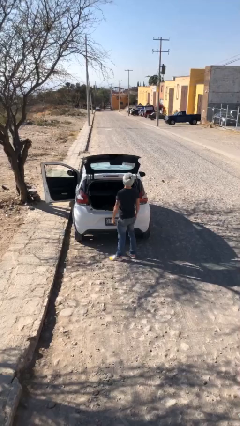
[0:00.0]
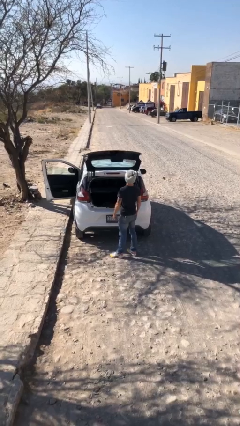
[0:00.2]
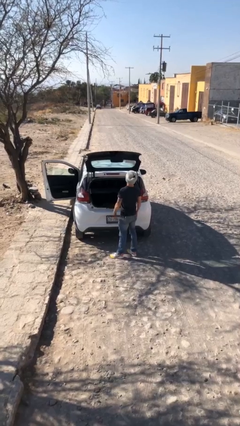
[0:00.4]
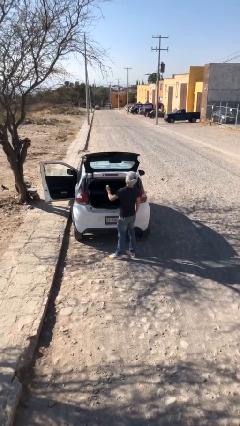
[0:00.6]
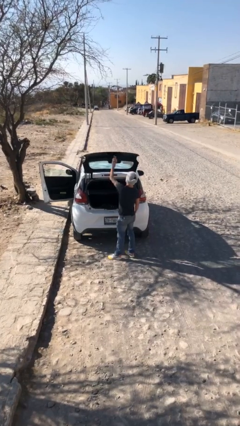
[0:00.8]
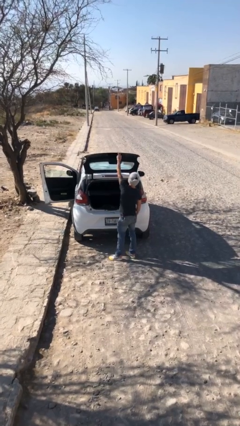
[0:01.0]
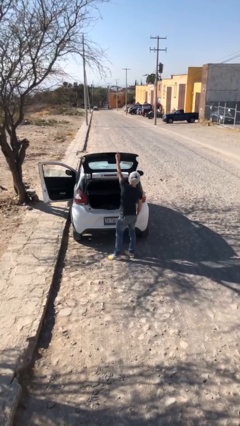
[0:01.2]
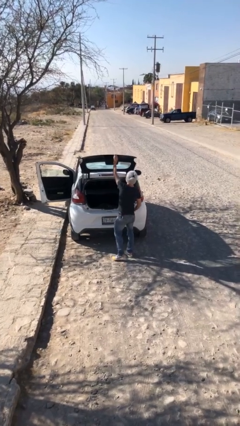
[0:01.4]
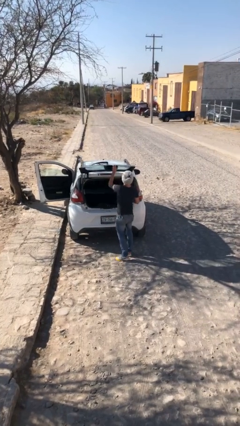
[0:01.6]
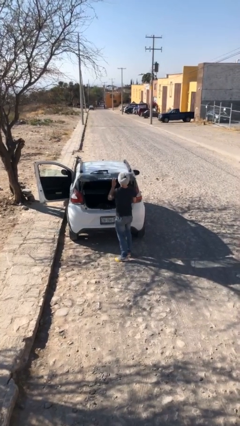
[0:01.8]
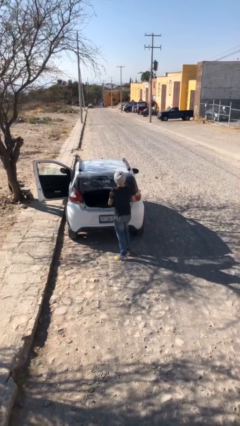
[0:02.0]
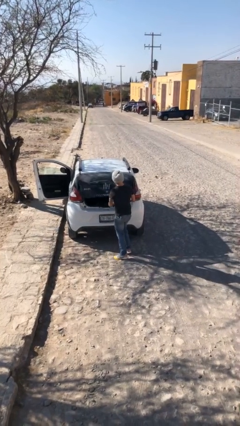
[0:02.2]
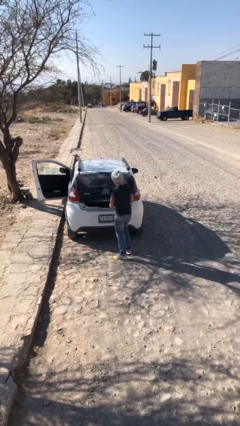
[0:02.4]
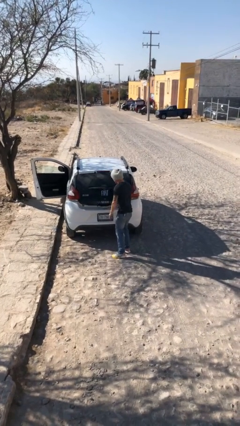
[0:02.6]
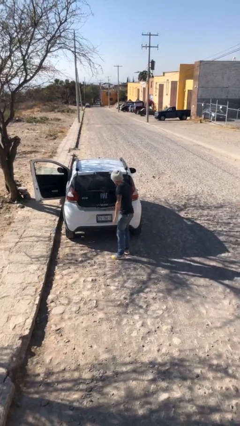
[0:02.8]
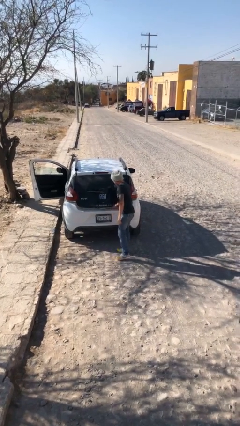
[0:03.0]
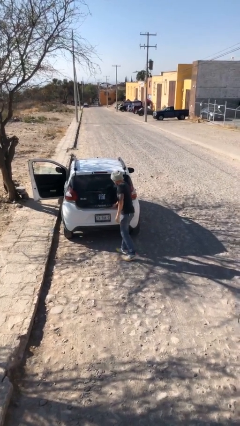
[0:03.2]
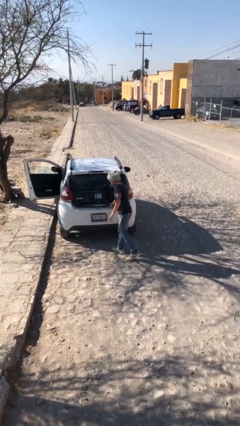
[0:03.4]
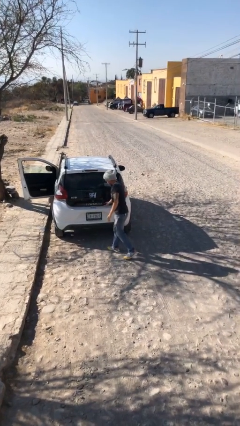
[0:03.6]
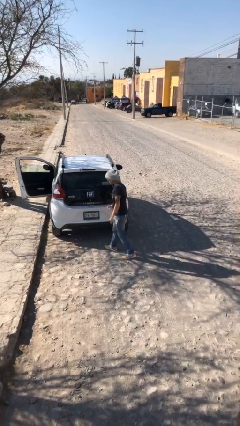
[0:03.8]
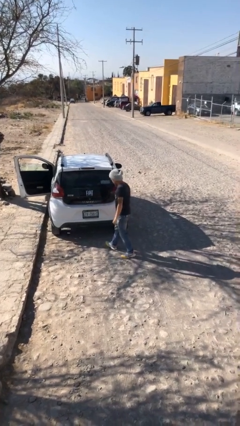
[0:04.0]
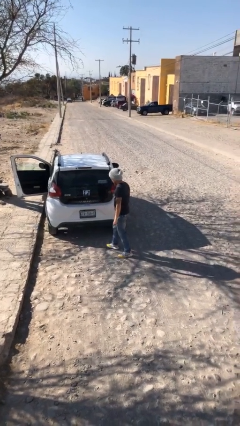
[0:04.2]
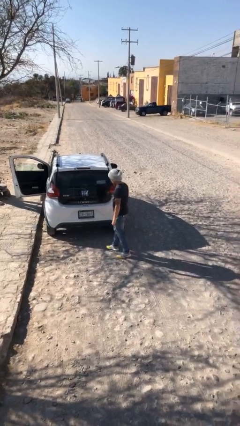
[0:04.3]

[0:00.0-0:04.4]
person closes car trunk

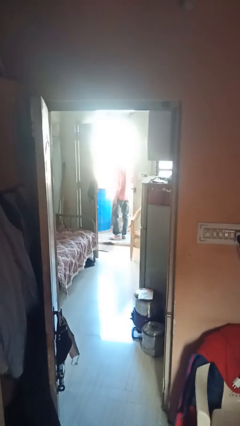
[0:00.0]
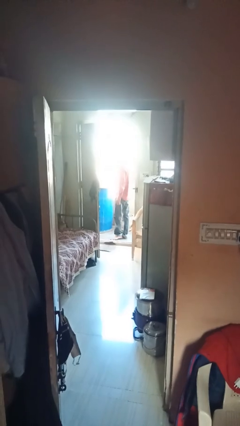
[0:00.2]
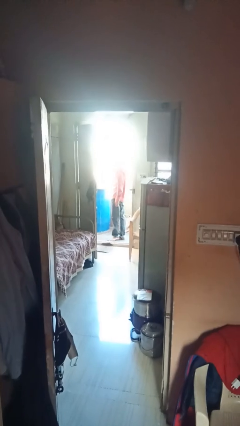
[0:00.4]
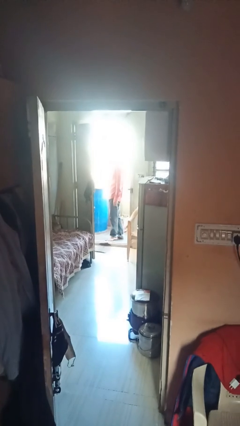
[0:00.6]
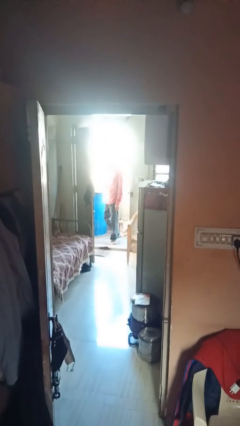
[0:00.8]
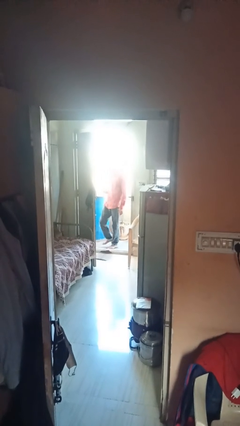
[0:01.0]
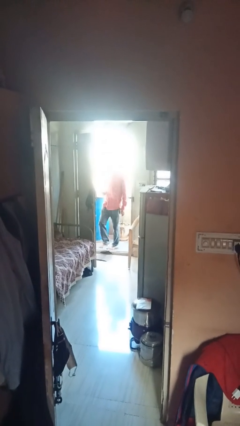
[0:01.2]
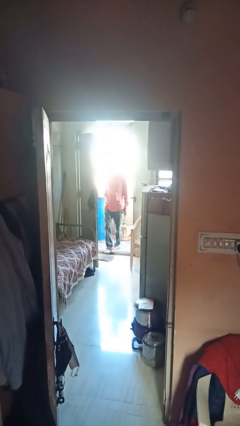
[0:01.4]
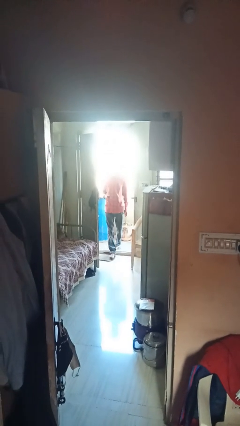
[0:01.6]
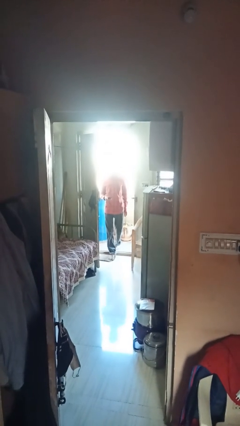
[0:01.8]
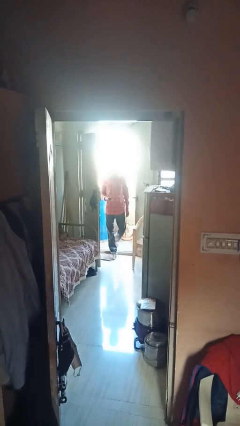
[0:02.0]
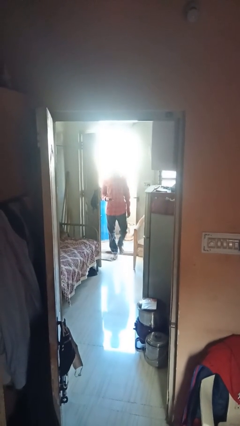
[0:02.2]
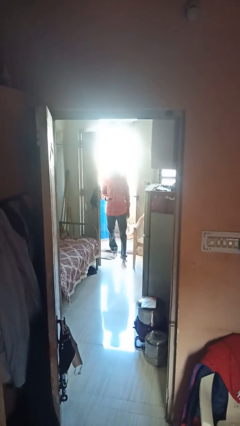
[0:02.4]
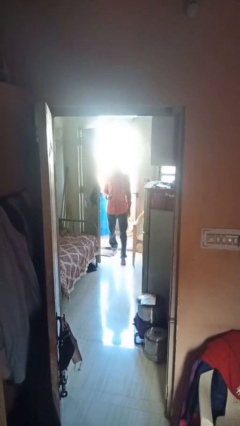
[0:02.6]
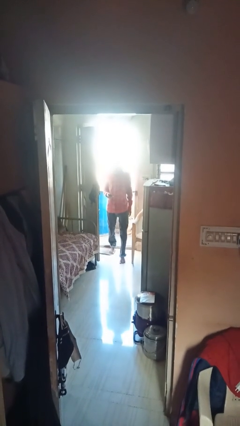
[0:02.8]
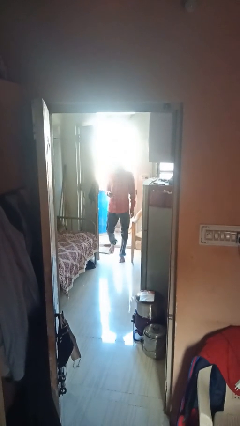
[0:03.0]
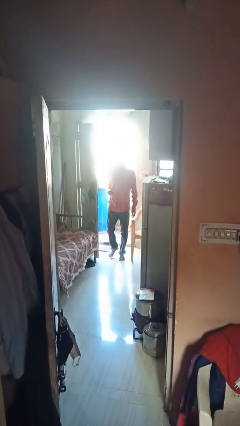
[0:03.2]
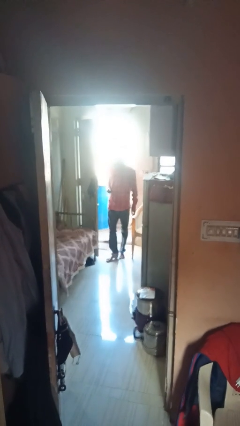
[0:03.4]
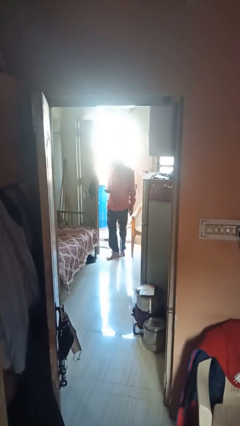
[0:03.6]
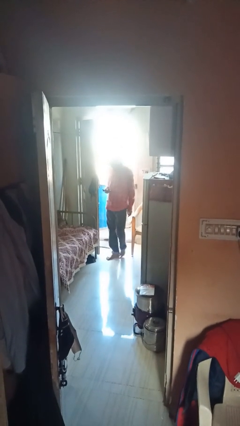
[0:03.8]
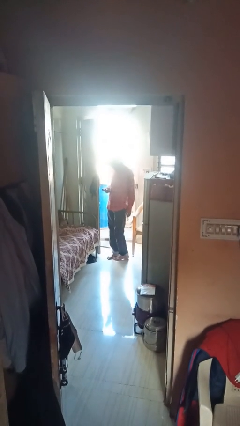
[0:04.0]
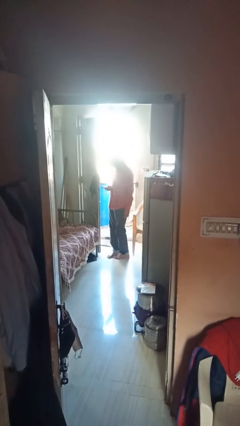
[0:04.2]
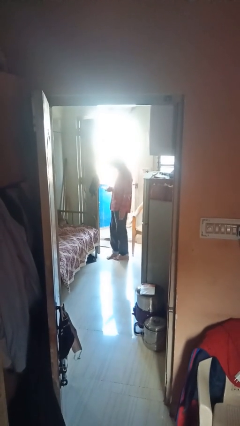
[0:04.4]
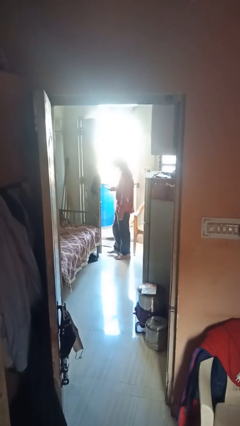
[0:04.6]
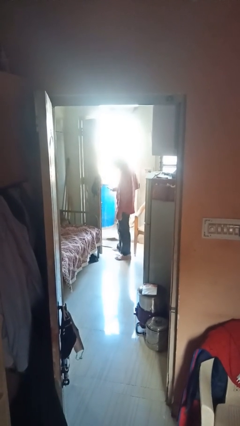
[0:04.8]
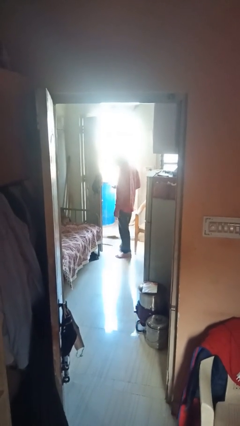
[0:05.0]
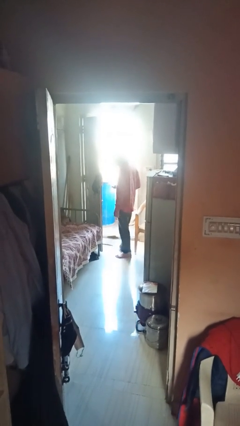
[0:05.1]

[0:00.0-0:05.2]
person enters scene through structure

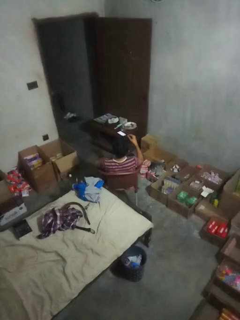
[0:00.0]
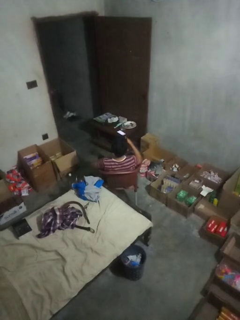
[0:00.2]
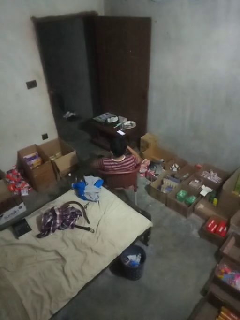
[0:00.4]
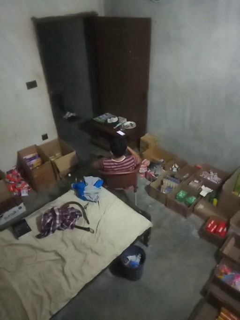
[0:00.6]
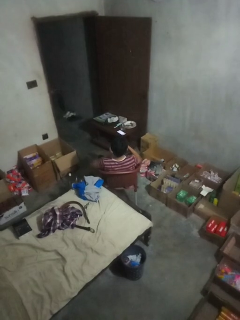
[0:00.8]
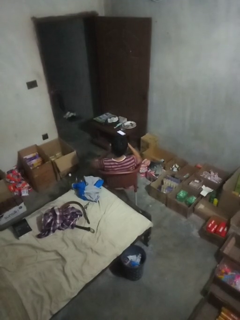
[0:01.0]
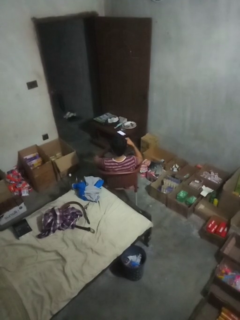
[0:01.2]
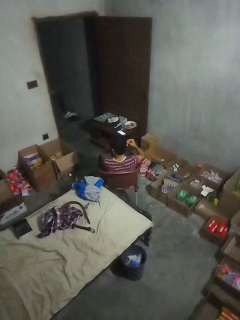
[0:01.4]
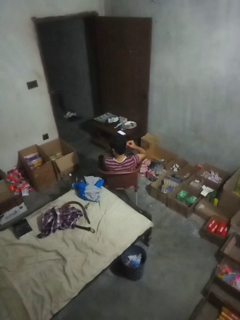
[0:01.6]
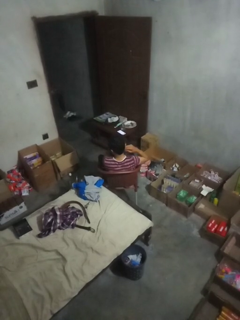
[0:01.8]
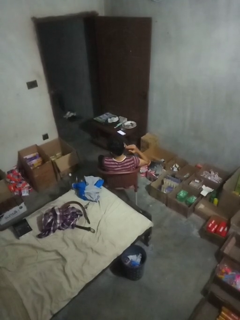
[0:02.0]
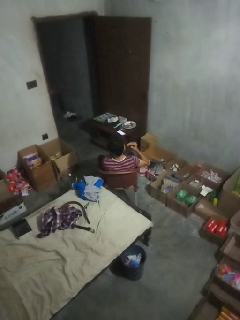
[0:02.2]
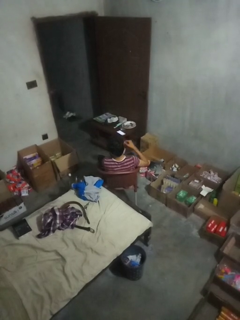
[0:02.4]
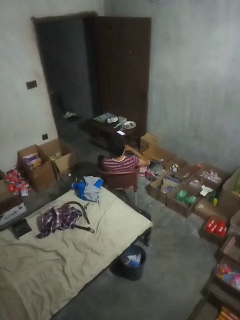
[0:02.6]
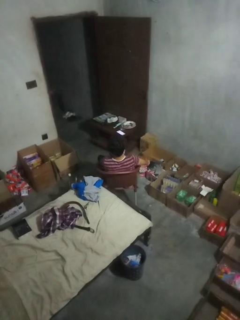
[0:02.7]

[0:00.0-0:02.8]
person puts on earrings

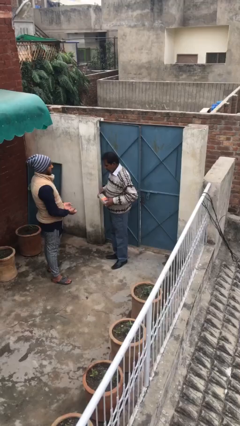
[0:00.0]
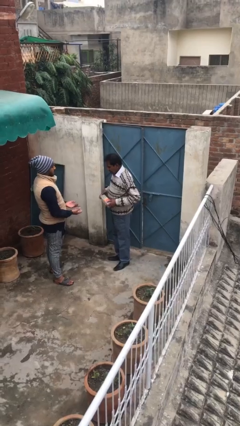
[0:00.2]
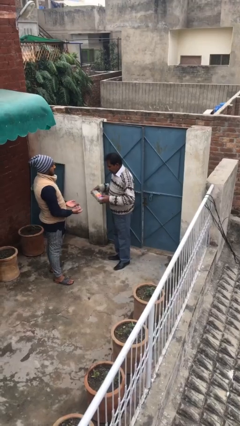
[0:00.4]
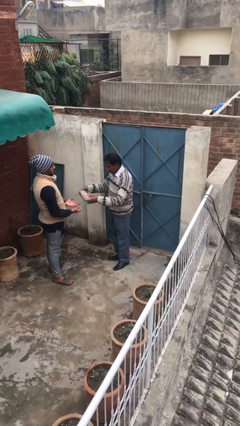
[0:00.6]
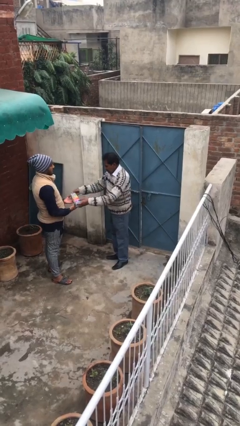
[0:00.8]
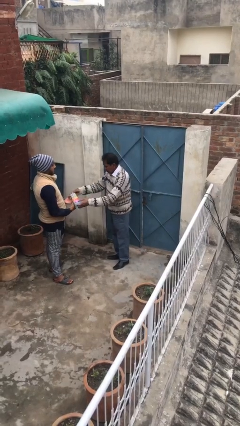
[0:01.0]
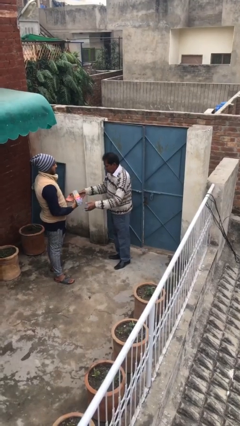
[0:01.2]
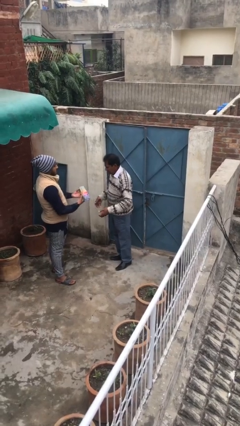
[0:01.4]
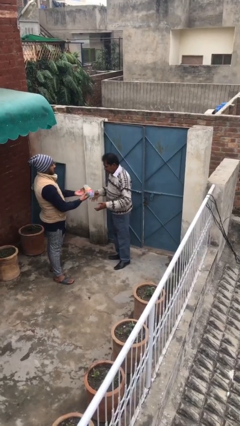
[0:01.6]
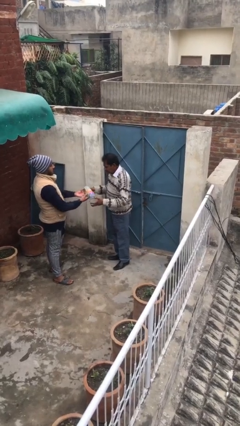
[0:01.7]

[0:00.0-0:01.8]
person transfers object to person

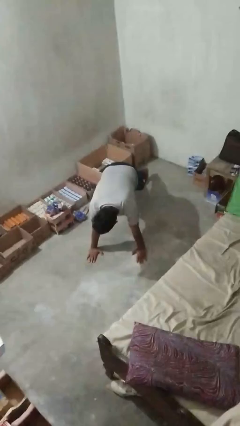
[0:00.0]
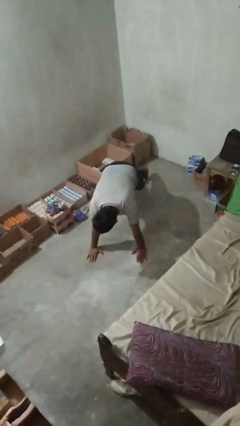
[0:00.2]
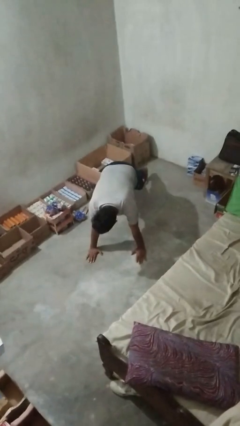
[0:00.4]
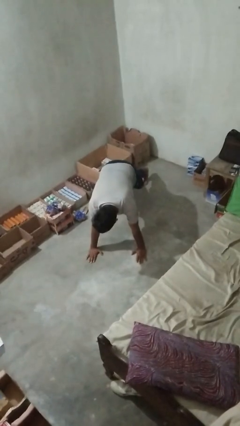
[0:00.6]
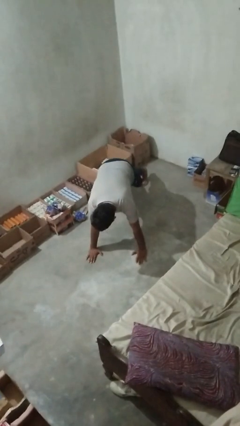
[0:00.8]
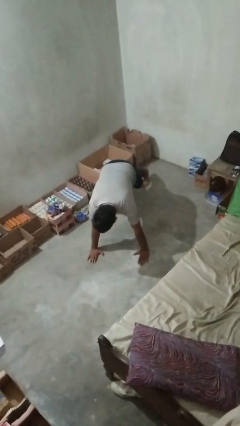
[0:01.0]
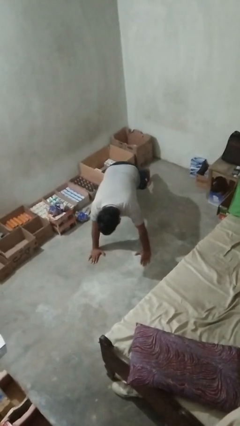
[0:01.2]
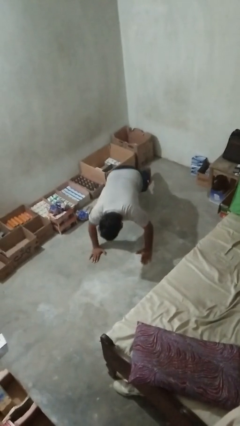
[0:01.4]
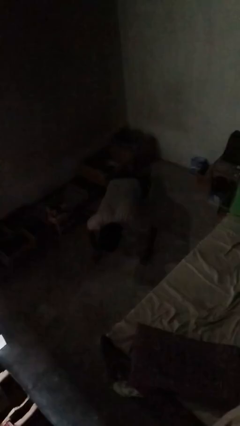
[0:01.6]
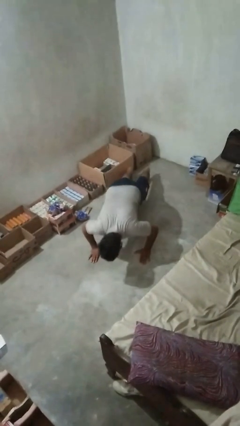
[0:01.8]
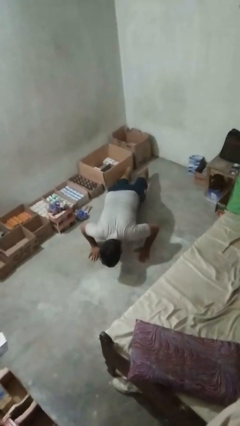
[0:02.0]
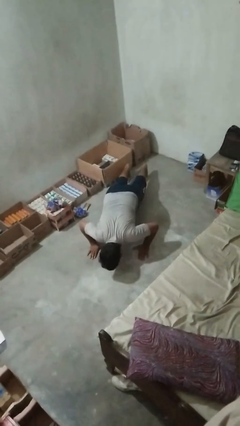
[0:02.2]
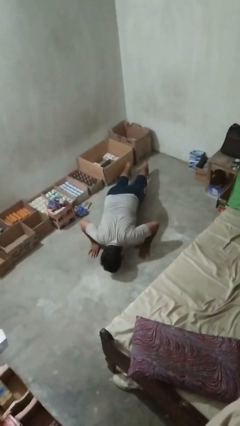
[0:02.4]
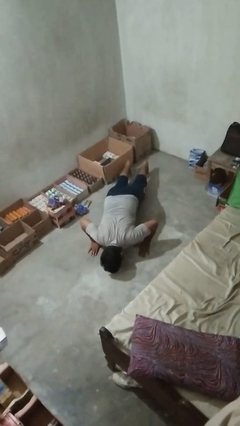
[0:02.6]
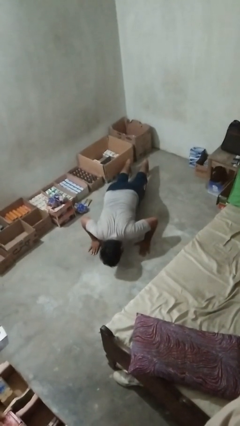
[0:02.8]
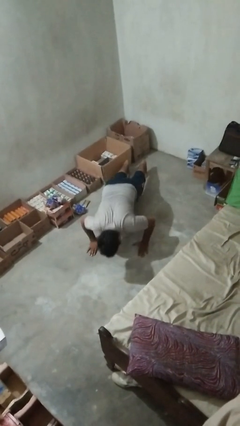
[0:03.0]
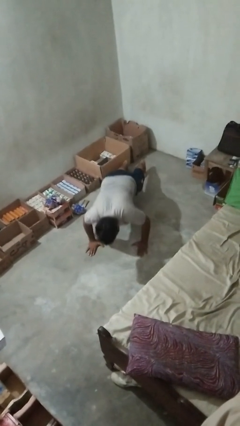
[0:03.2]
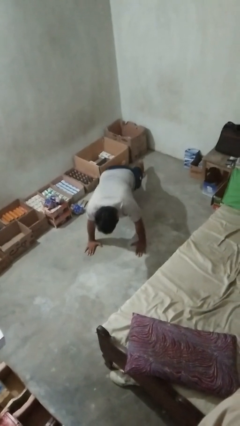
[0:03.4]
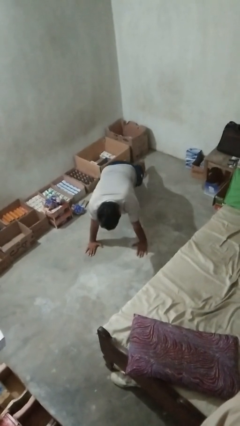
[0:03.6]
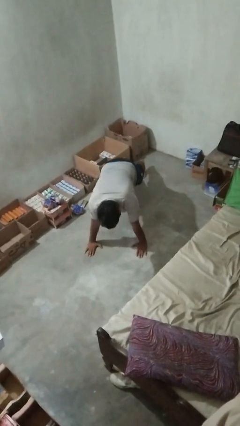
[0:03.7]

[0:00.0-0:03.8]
person exercises with pushup
